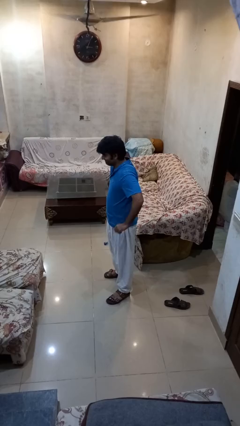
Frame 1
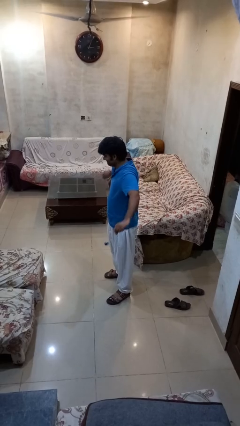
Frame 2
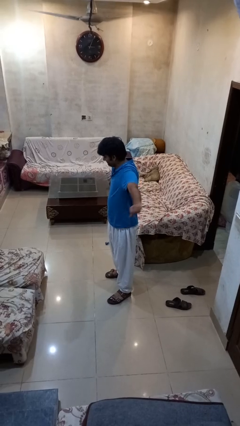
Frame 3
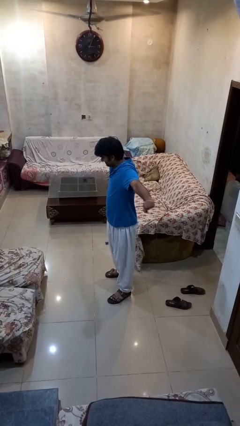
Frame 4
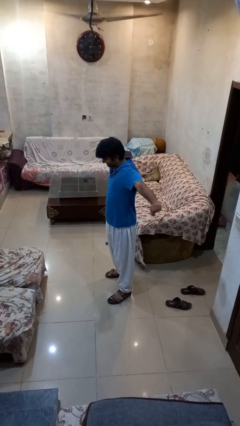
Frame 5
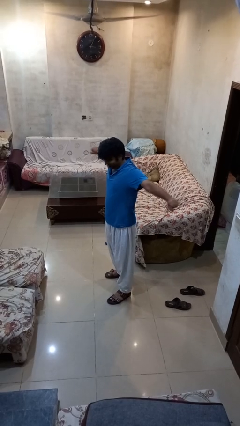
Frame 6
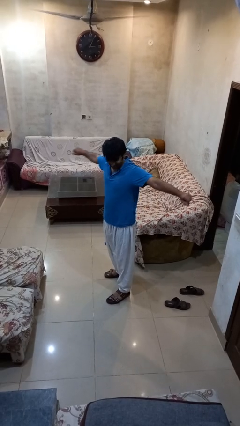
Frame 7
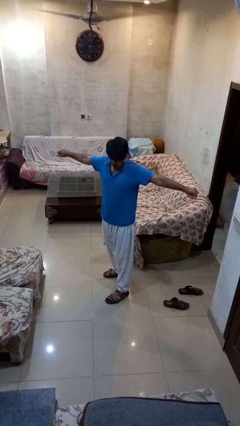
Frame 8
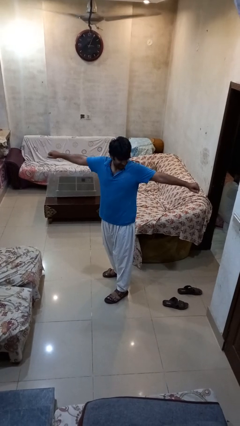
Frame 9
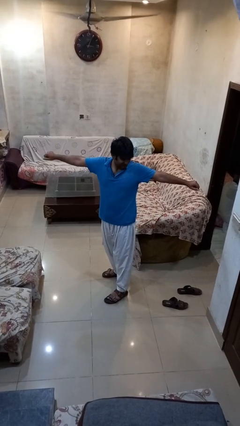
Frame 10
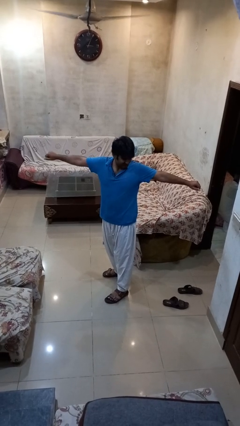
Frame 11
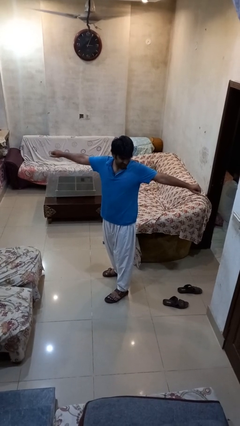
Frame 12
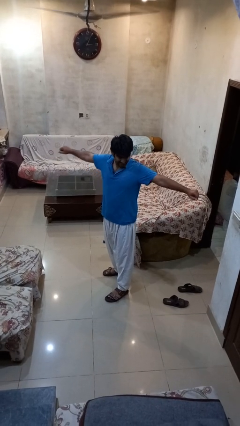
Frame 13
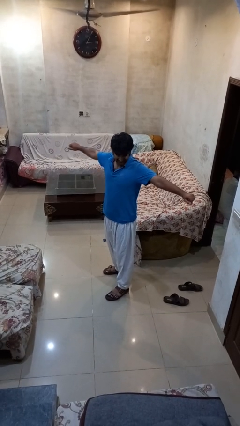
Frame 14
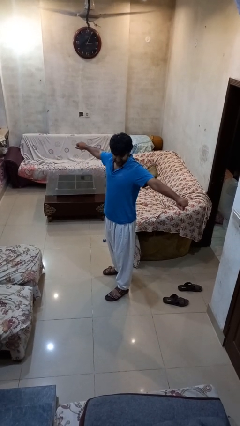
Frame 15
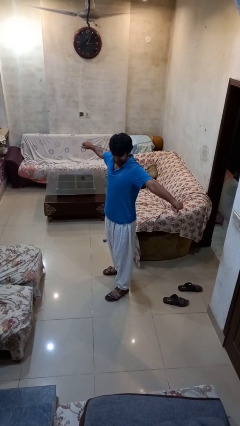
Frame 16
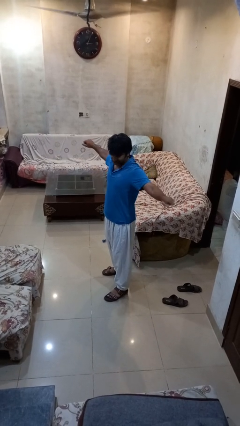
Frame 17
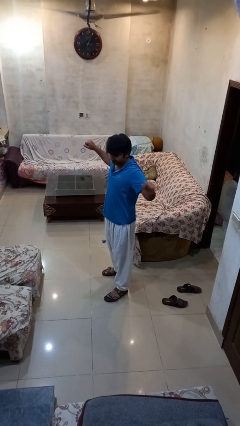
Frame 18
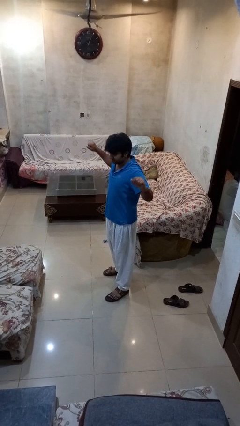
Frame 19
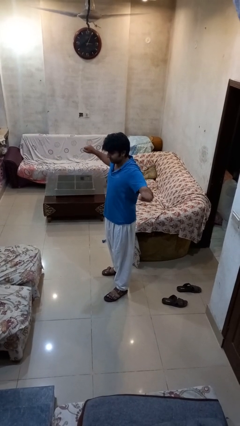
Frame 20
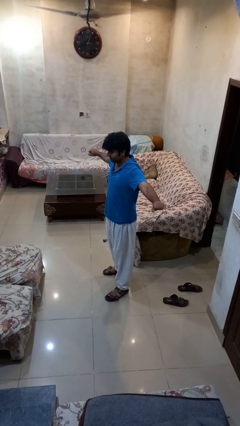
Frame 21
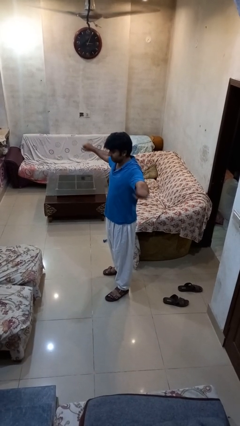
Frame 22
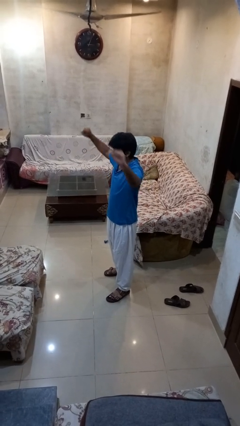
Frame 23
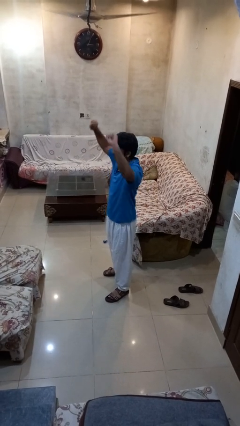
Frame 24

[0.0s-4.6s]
person stretches arms to side

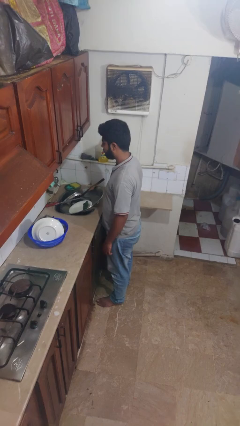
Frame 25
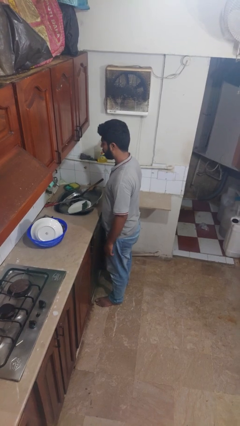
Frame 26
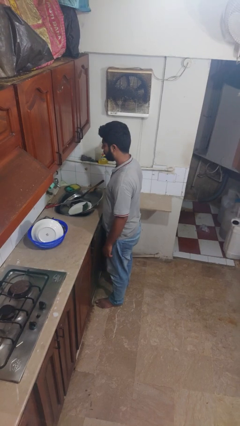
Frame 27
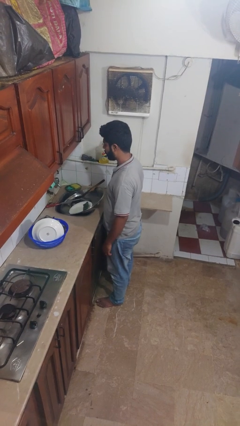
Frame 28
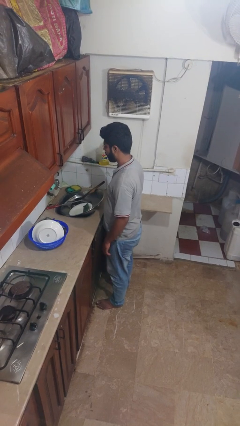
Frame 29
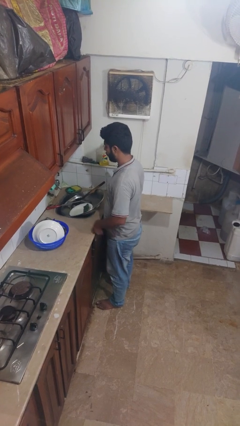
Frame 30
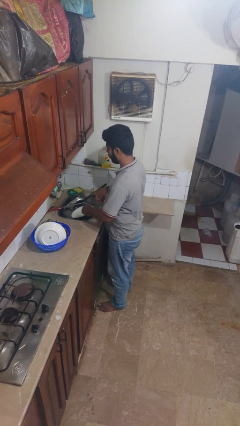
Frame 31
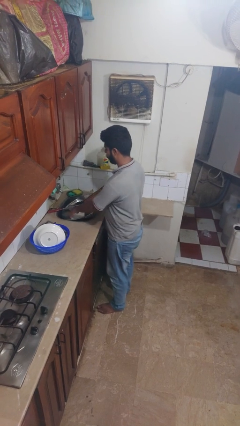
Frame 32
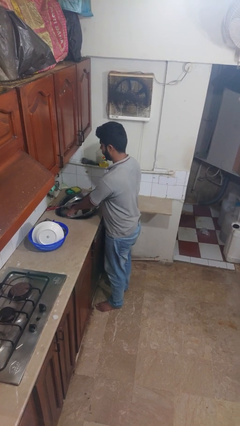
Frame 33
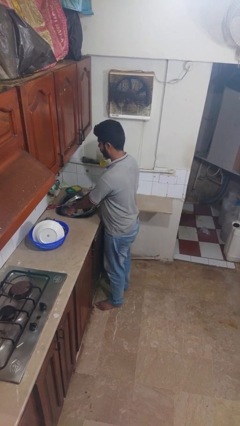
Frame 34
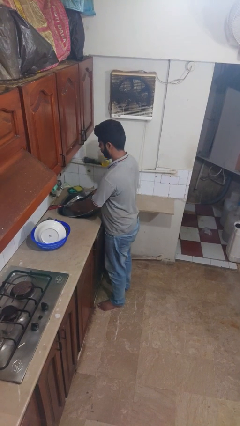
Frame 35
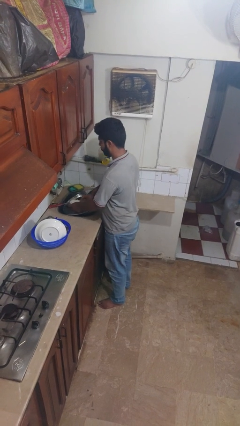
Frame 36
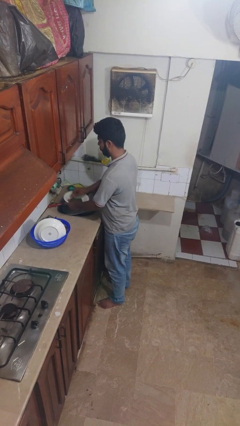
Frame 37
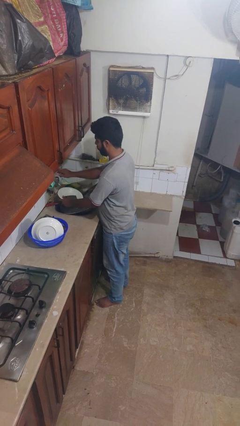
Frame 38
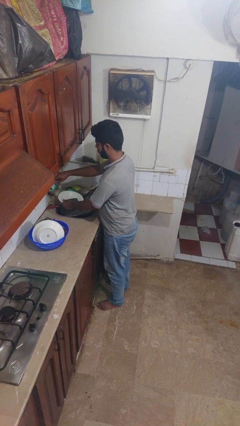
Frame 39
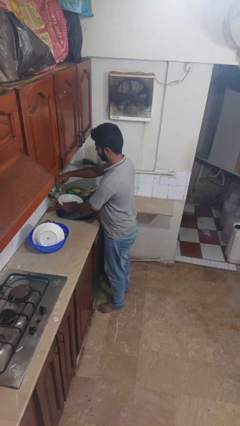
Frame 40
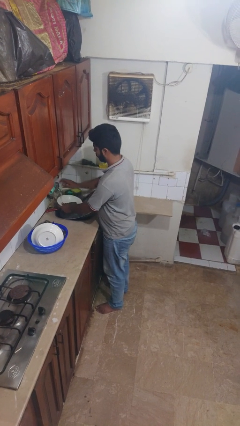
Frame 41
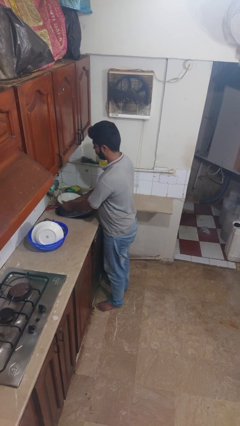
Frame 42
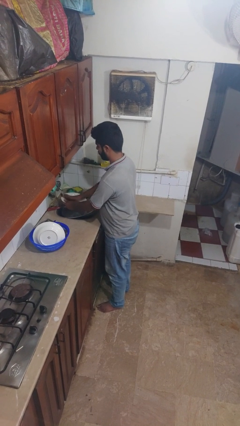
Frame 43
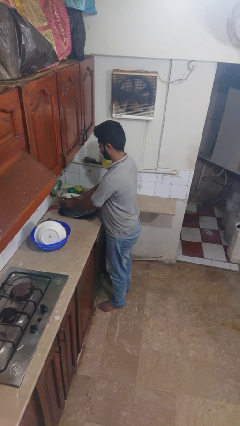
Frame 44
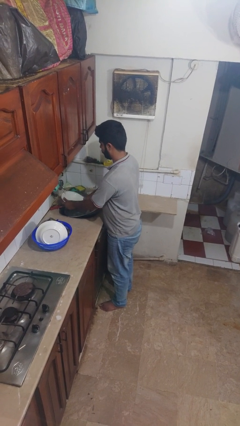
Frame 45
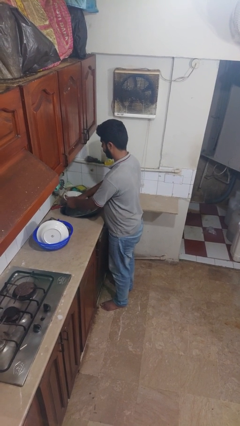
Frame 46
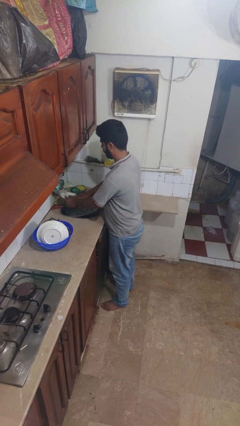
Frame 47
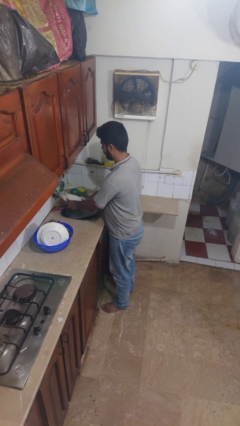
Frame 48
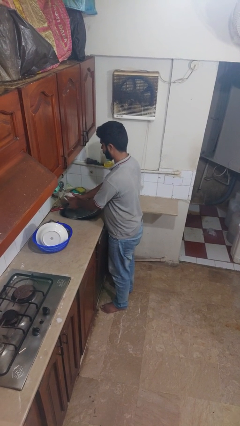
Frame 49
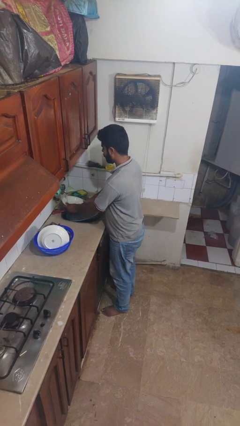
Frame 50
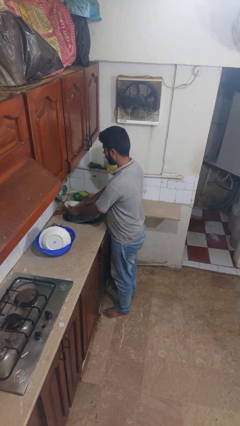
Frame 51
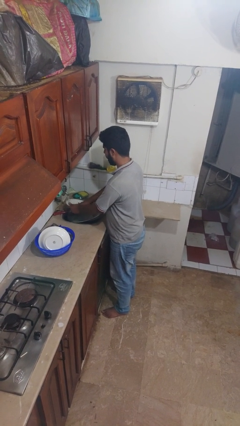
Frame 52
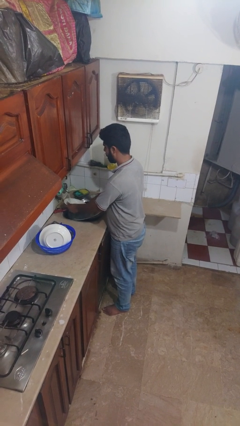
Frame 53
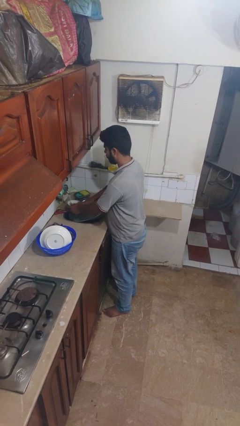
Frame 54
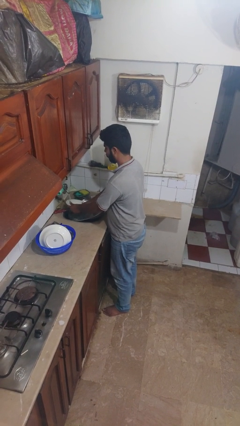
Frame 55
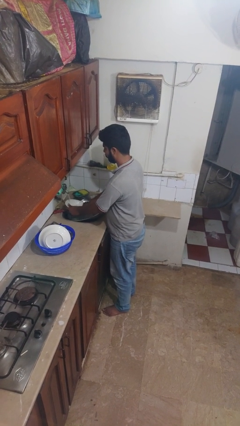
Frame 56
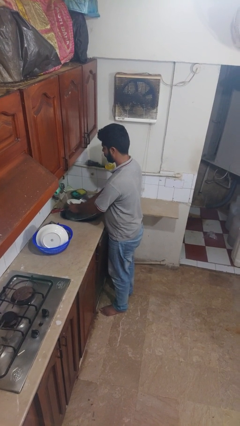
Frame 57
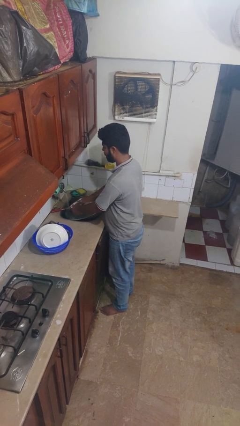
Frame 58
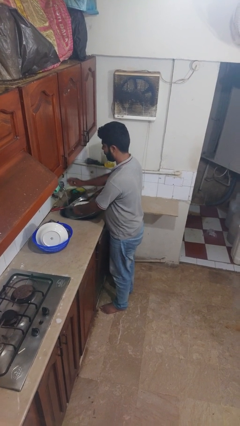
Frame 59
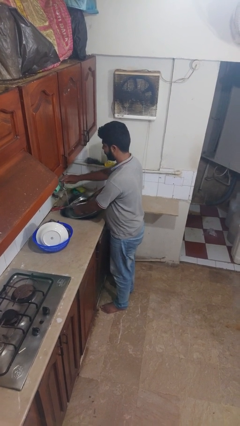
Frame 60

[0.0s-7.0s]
person washes dish

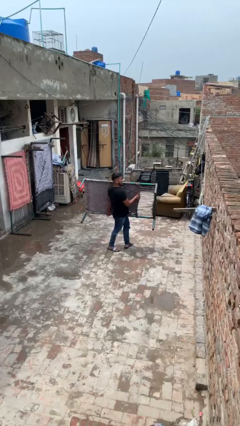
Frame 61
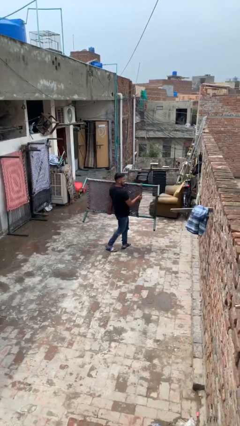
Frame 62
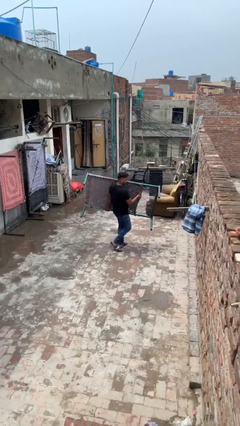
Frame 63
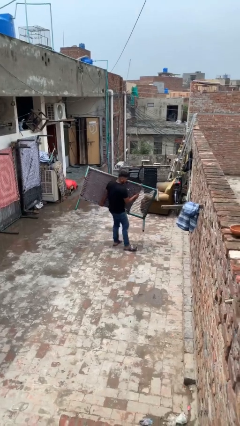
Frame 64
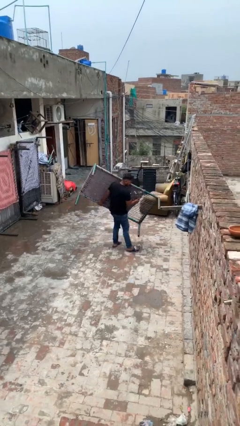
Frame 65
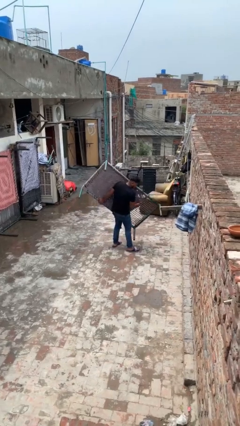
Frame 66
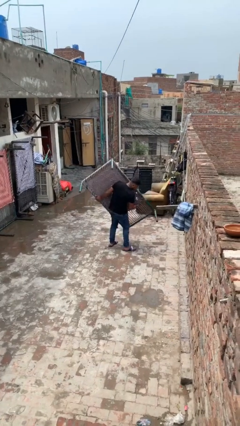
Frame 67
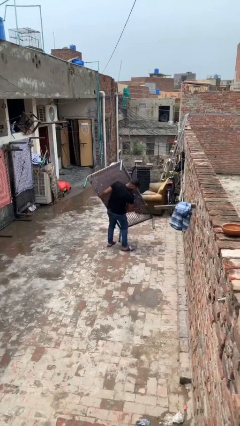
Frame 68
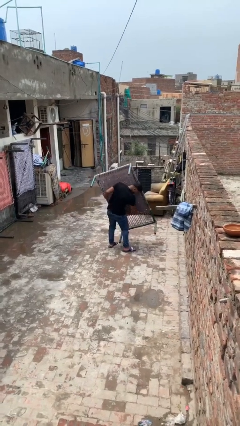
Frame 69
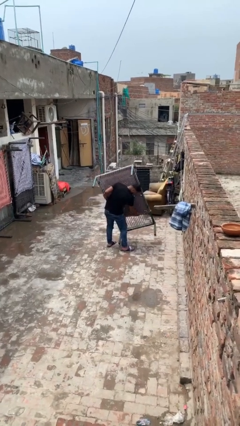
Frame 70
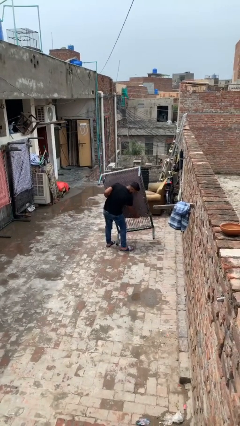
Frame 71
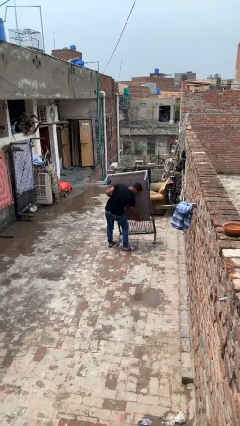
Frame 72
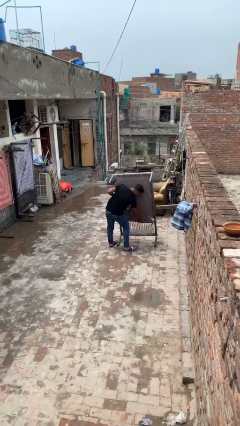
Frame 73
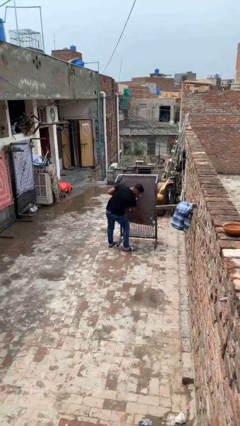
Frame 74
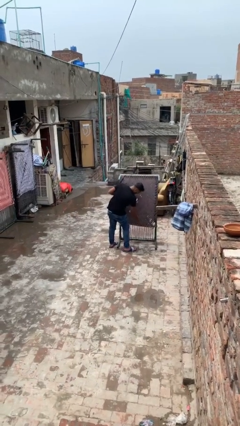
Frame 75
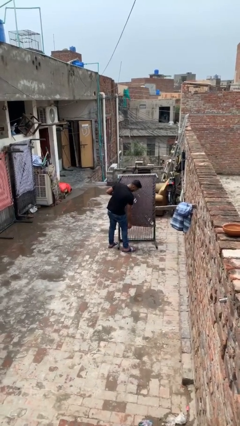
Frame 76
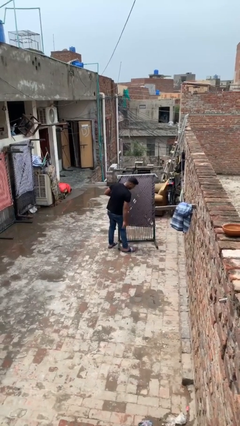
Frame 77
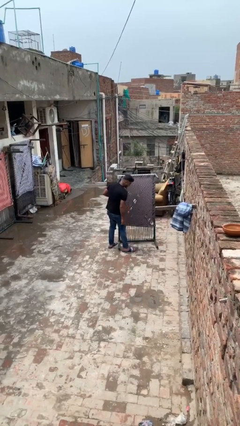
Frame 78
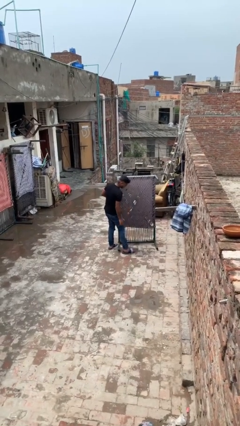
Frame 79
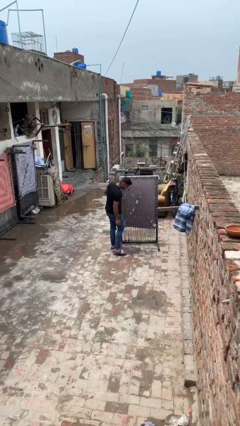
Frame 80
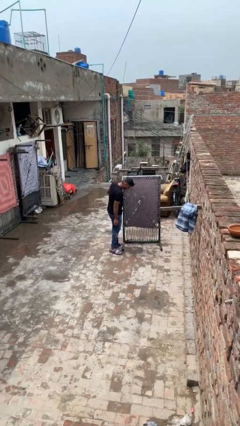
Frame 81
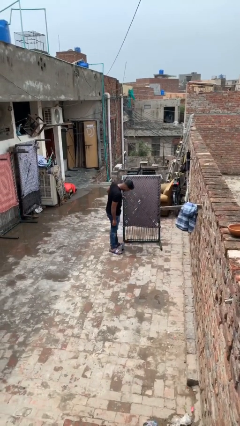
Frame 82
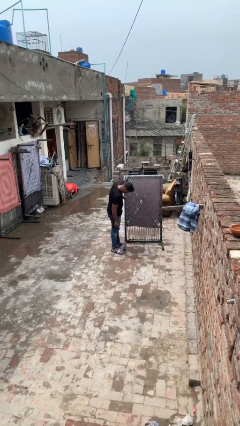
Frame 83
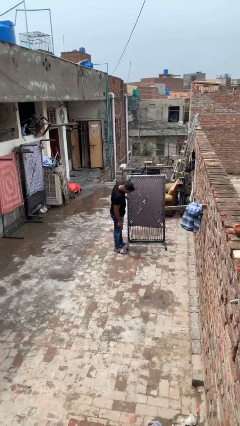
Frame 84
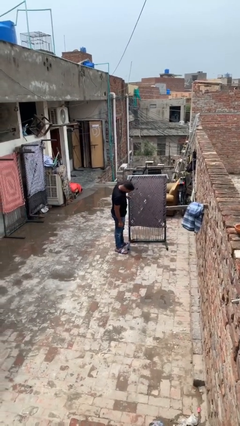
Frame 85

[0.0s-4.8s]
person puts down object on floor

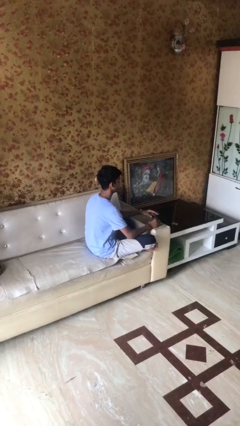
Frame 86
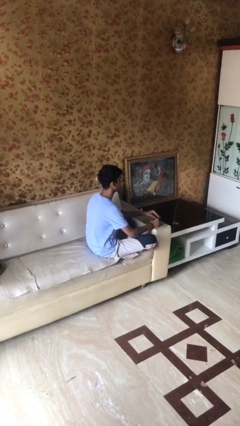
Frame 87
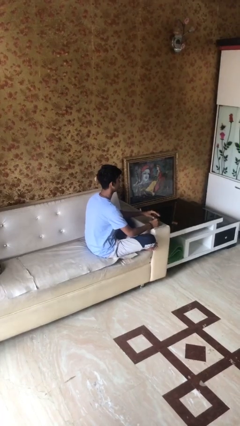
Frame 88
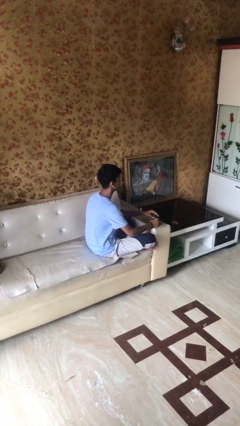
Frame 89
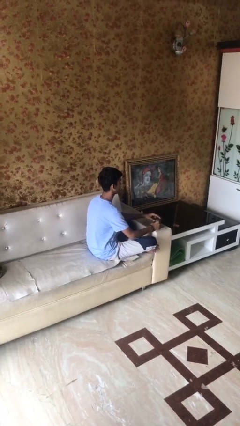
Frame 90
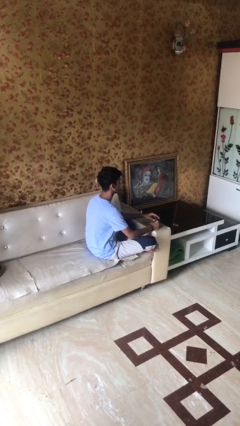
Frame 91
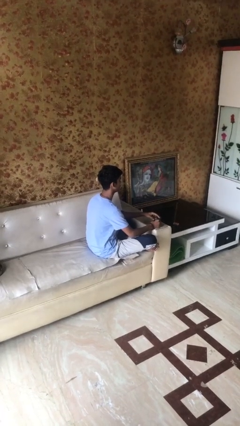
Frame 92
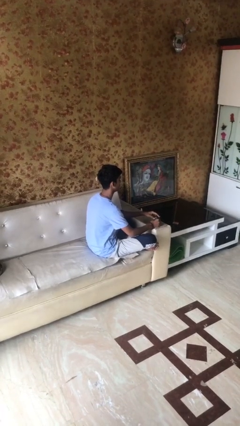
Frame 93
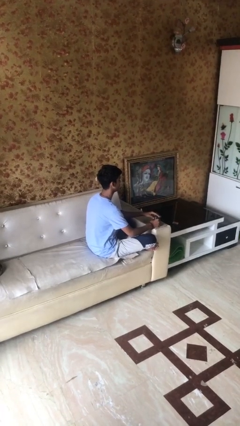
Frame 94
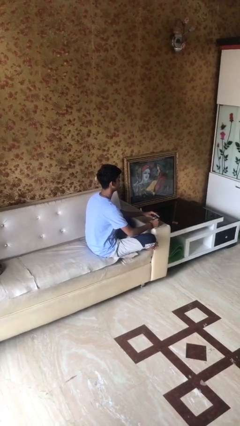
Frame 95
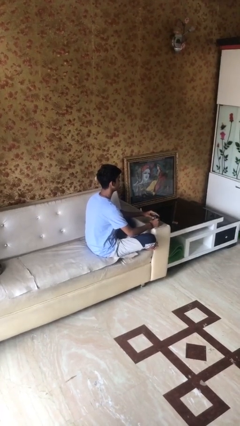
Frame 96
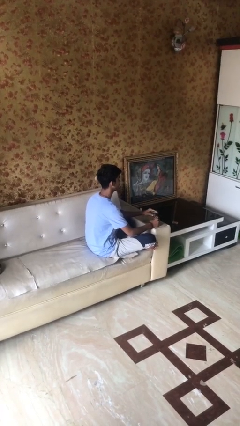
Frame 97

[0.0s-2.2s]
person opens jar
